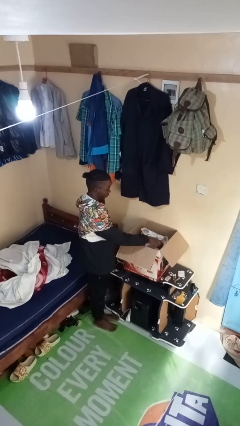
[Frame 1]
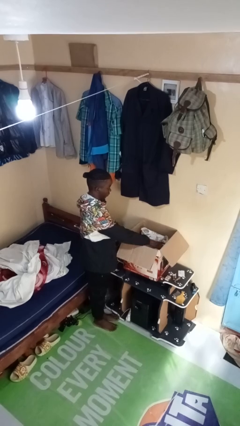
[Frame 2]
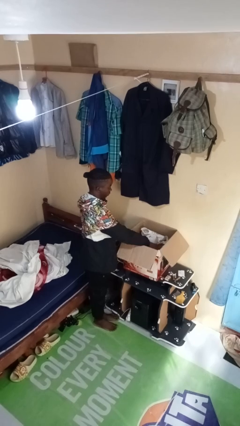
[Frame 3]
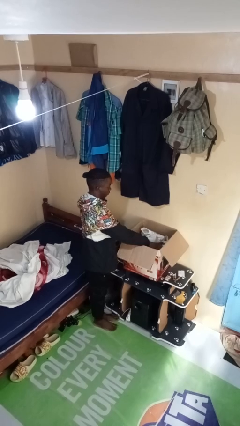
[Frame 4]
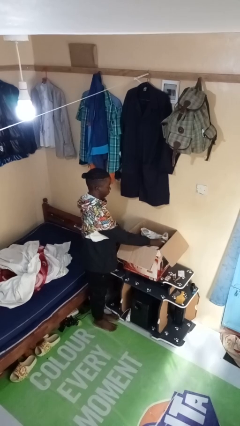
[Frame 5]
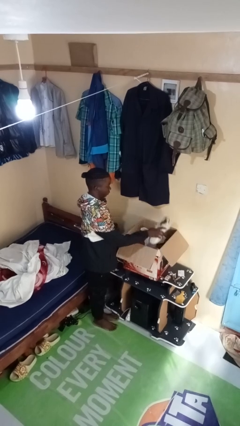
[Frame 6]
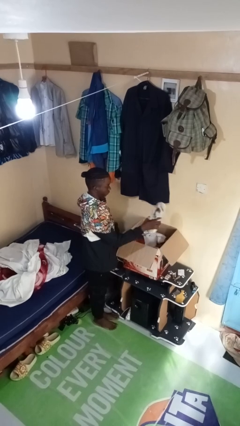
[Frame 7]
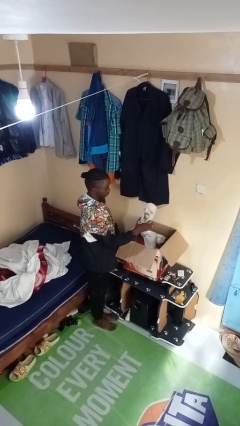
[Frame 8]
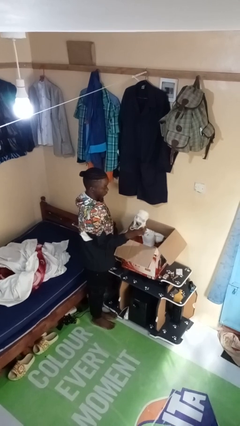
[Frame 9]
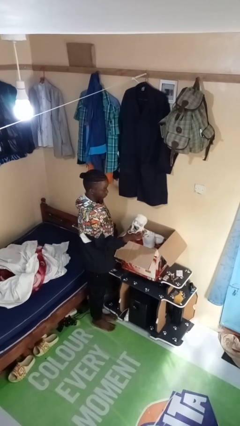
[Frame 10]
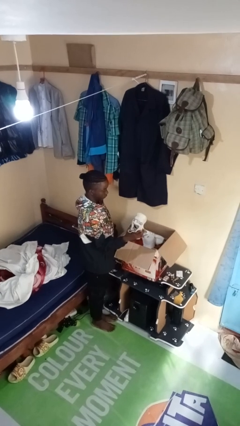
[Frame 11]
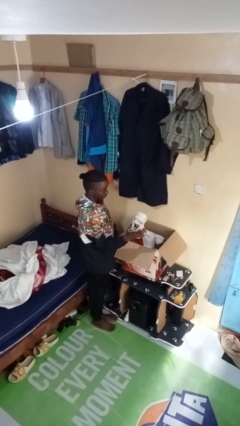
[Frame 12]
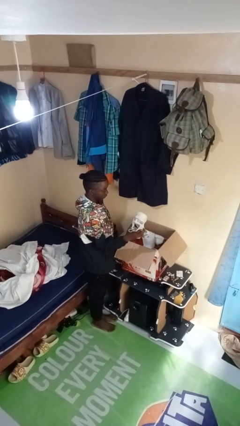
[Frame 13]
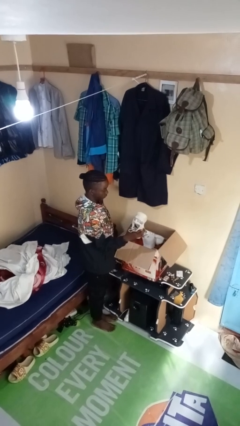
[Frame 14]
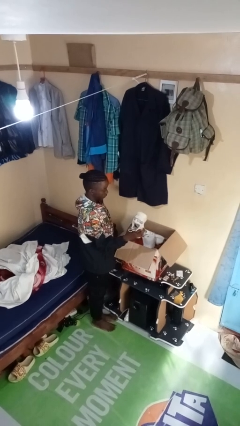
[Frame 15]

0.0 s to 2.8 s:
person takes object from box

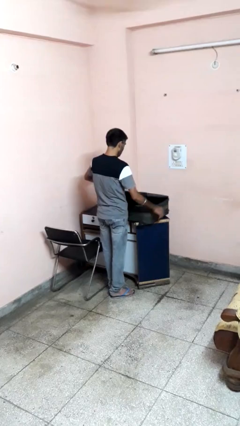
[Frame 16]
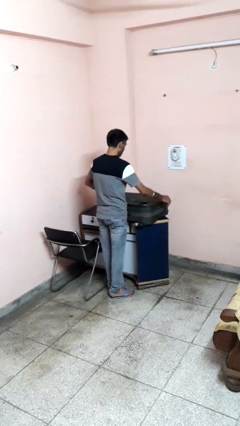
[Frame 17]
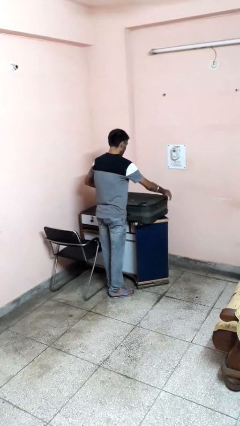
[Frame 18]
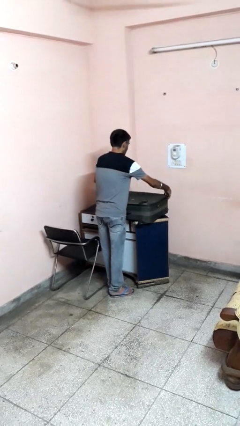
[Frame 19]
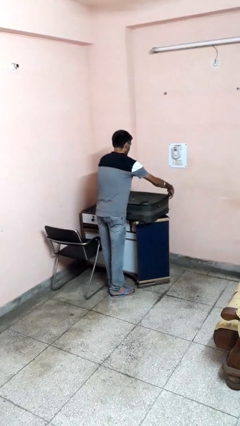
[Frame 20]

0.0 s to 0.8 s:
person closes suitcase

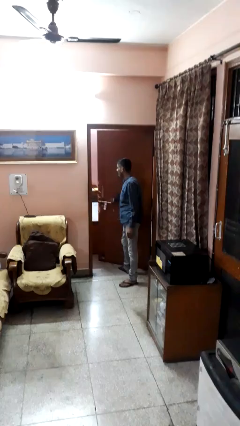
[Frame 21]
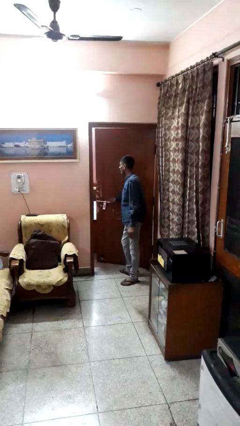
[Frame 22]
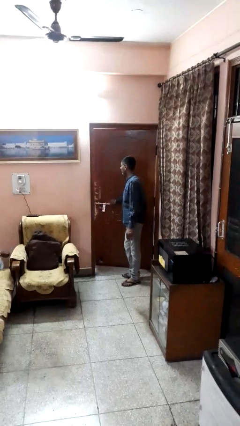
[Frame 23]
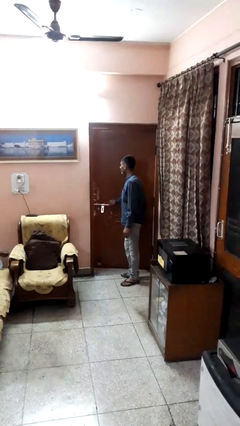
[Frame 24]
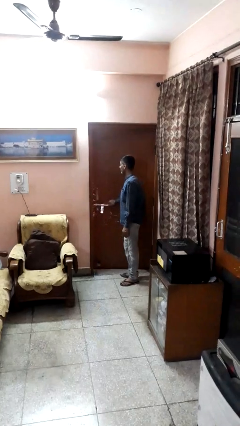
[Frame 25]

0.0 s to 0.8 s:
person closes facility door

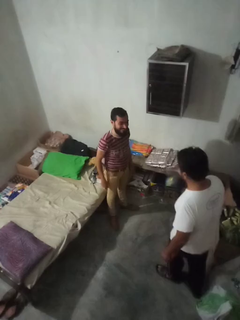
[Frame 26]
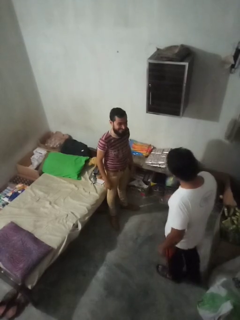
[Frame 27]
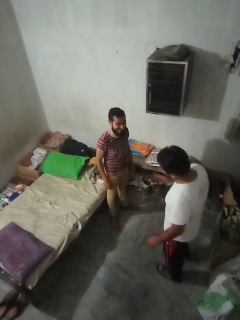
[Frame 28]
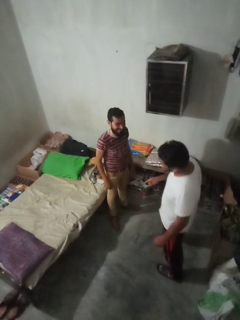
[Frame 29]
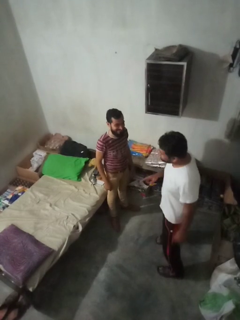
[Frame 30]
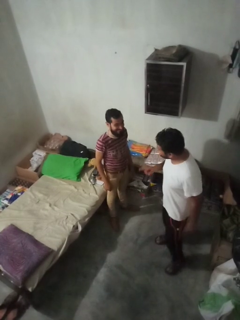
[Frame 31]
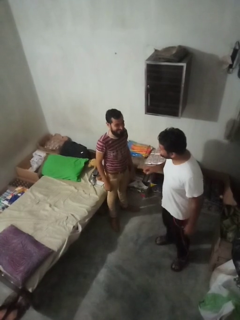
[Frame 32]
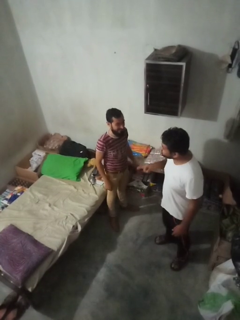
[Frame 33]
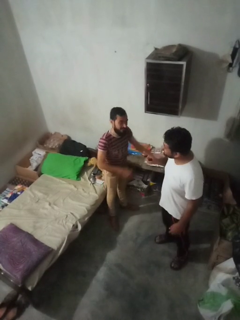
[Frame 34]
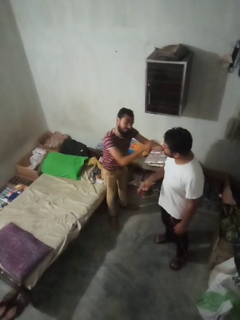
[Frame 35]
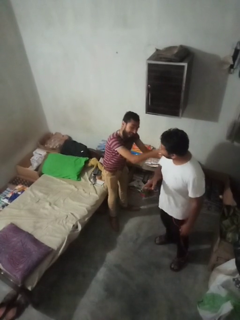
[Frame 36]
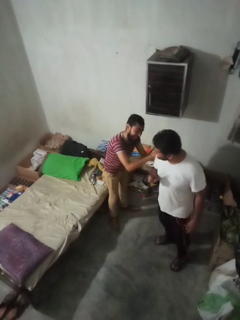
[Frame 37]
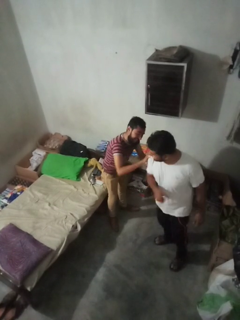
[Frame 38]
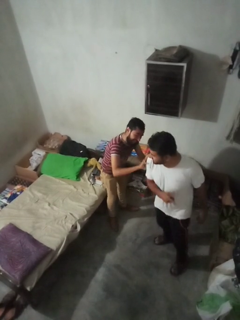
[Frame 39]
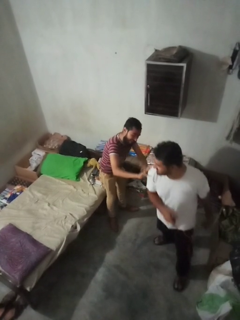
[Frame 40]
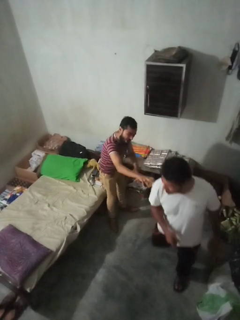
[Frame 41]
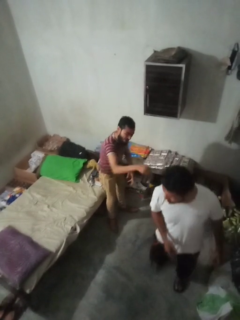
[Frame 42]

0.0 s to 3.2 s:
person shoves person

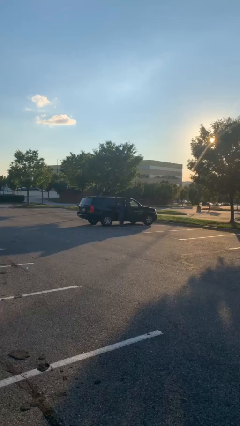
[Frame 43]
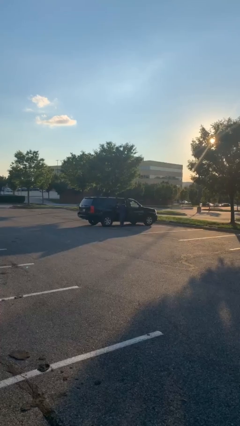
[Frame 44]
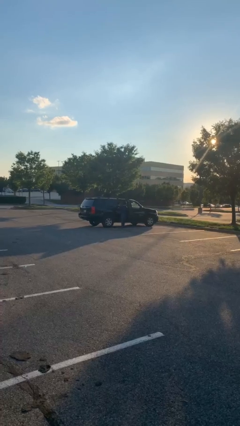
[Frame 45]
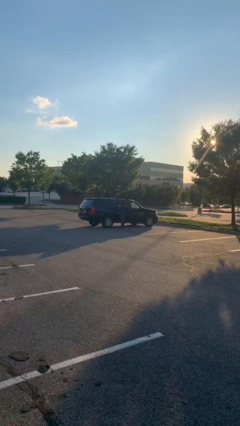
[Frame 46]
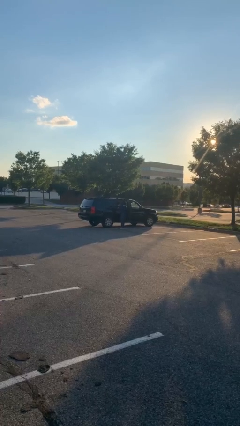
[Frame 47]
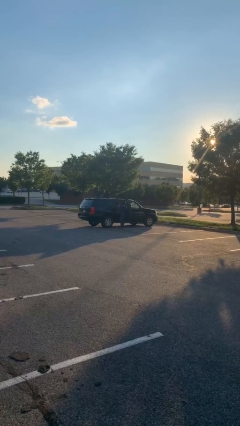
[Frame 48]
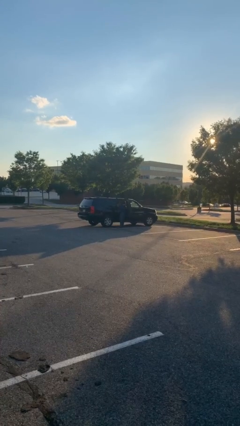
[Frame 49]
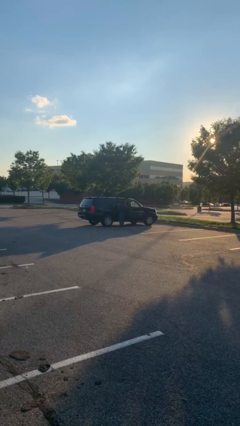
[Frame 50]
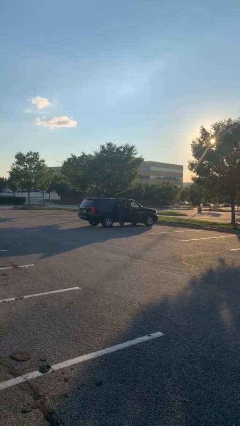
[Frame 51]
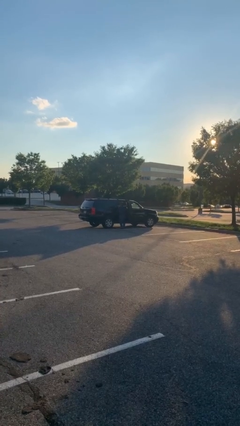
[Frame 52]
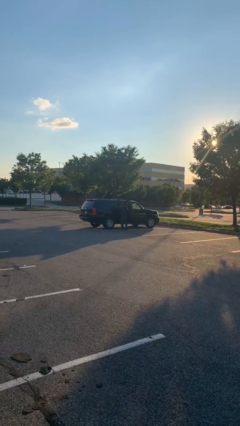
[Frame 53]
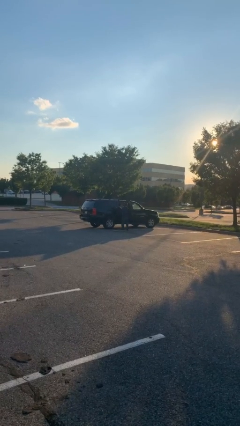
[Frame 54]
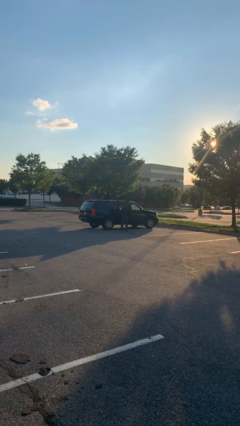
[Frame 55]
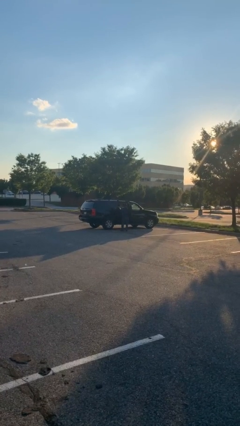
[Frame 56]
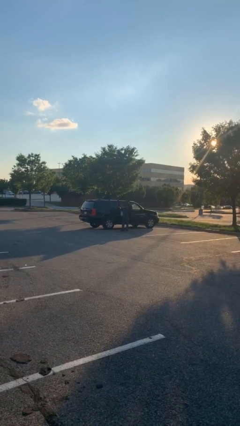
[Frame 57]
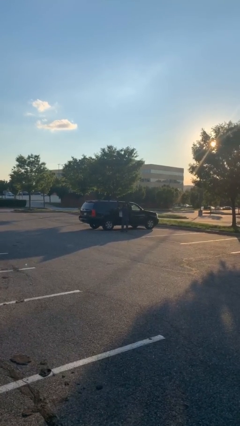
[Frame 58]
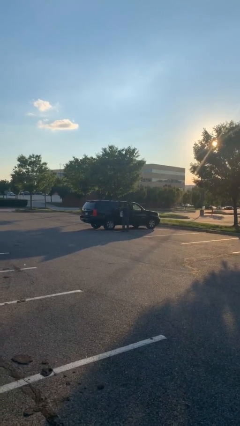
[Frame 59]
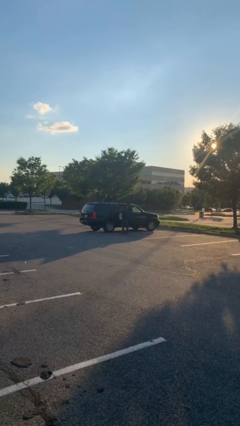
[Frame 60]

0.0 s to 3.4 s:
person unloads car

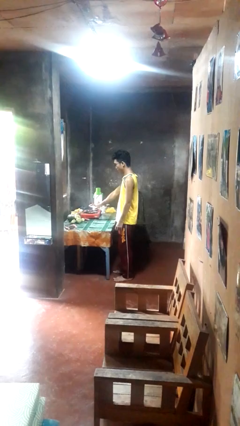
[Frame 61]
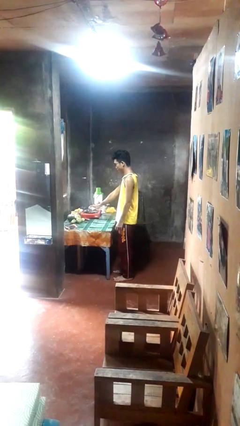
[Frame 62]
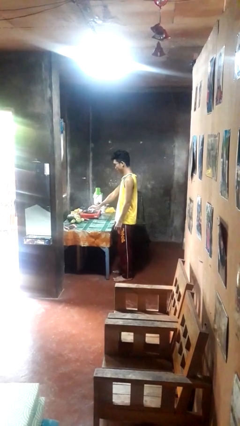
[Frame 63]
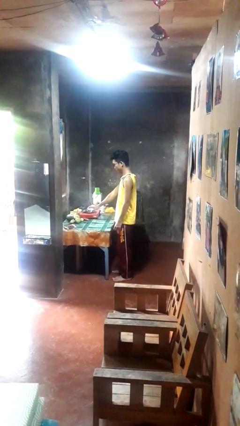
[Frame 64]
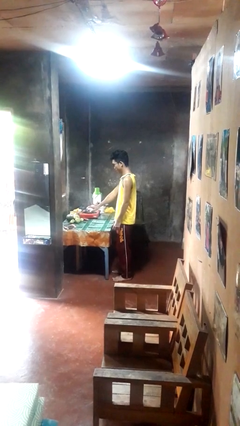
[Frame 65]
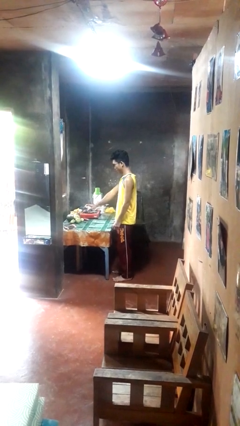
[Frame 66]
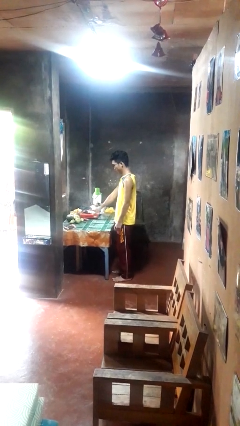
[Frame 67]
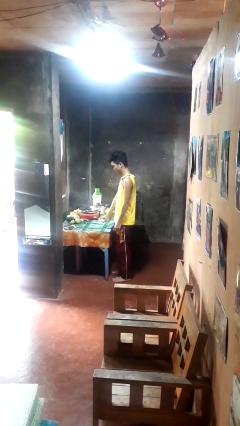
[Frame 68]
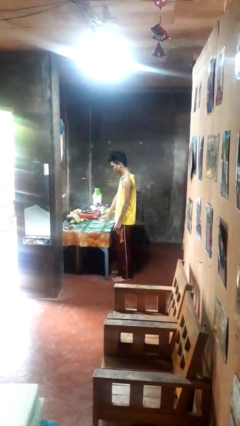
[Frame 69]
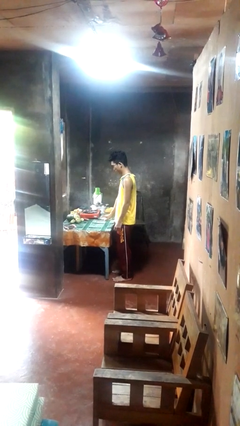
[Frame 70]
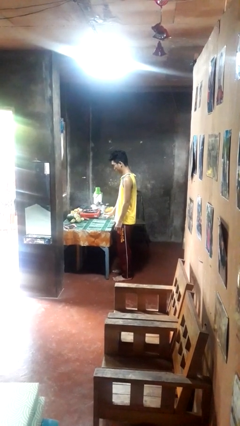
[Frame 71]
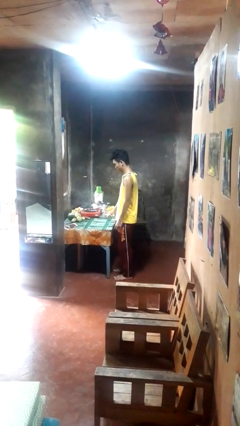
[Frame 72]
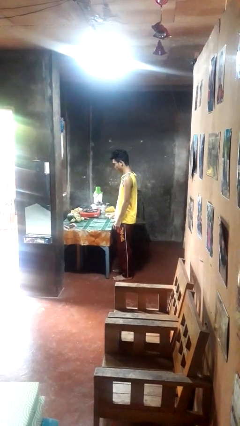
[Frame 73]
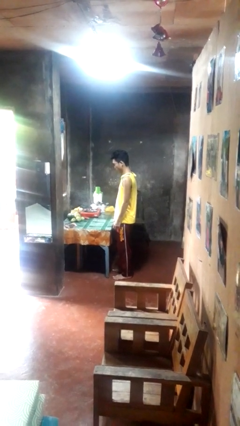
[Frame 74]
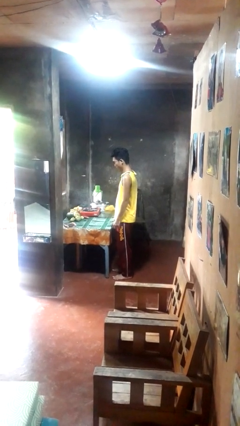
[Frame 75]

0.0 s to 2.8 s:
person sprays from bottle

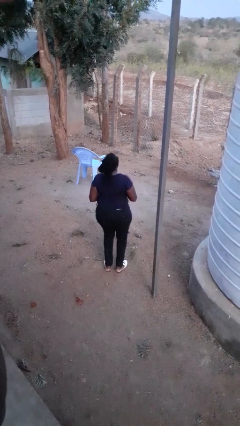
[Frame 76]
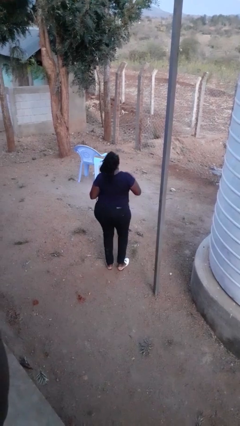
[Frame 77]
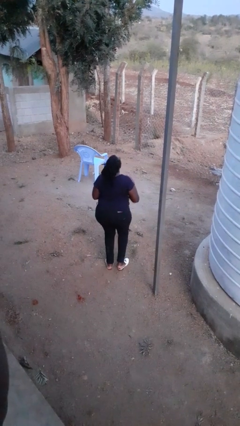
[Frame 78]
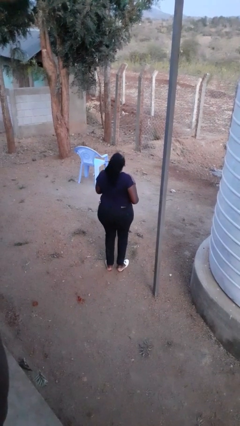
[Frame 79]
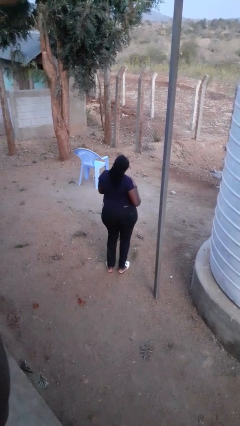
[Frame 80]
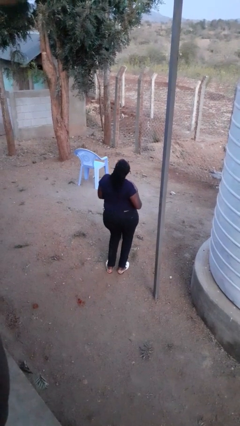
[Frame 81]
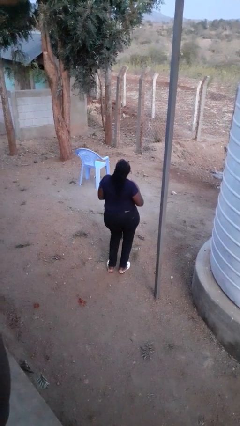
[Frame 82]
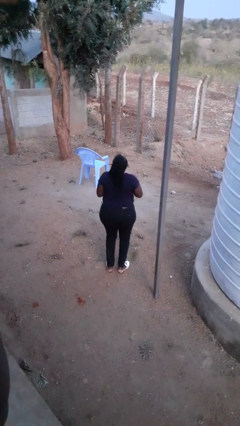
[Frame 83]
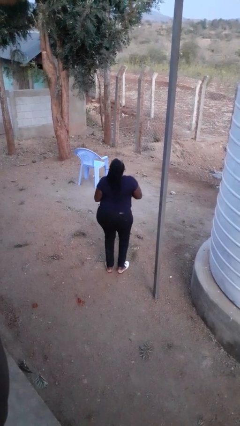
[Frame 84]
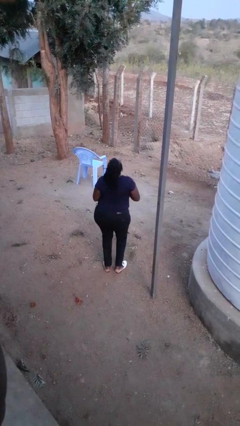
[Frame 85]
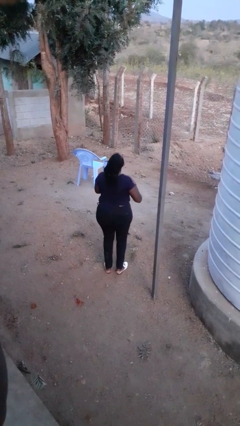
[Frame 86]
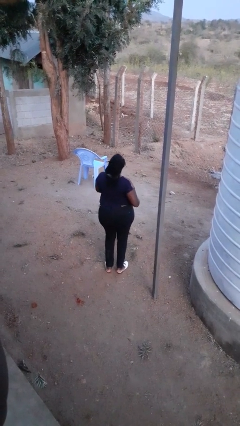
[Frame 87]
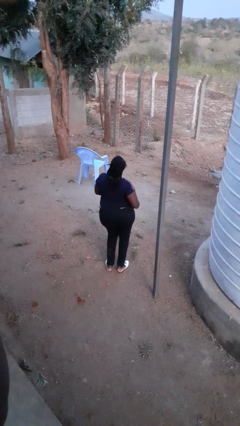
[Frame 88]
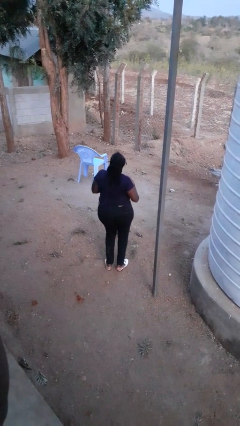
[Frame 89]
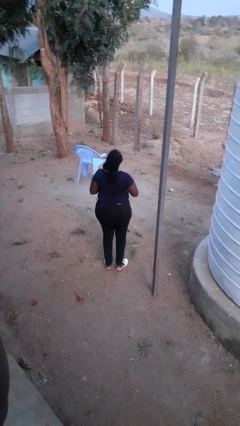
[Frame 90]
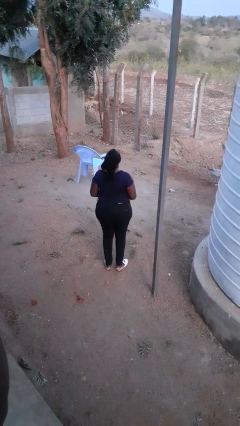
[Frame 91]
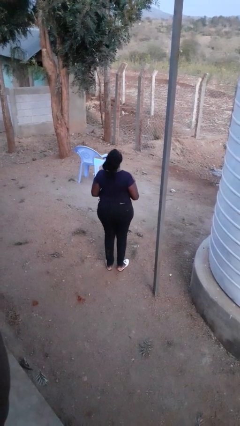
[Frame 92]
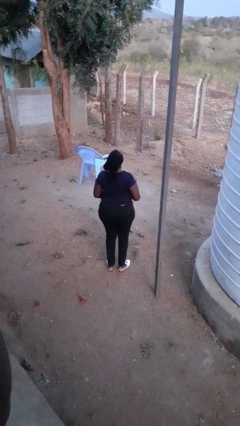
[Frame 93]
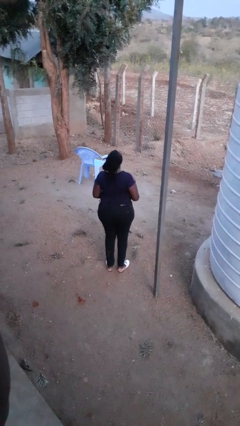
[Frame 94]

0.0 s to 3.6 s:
person dances in place

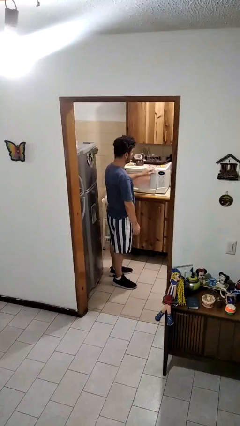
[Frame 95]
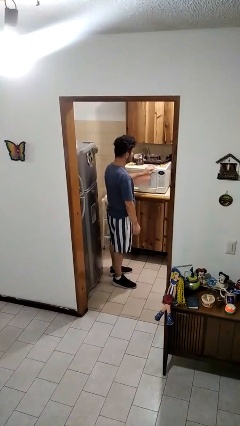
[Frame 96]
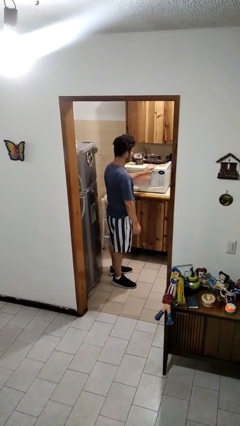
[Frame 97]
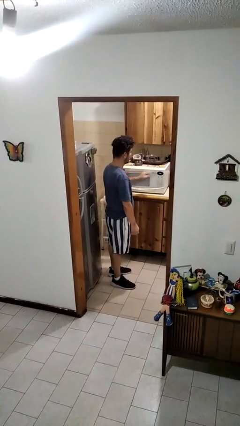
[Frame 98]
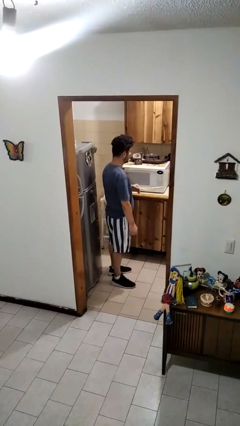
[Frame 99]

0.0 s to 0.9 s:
person closes microwave
